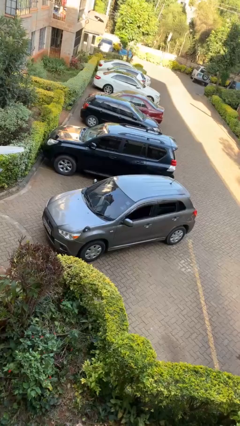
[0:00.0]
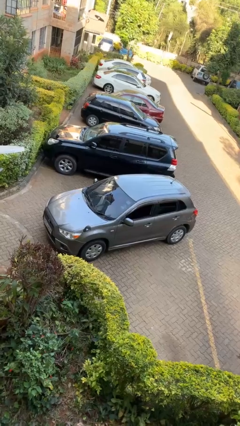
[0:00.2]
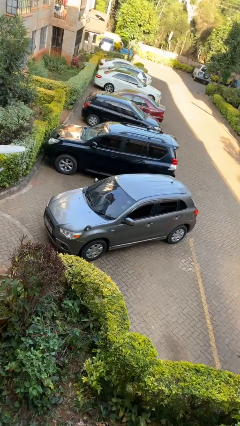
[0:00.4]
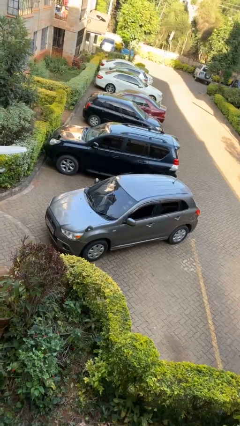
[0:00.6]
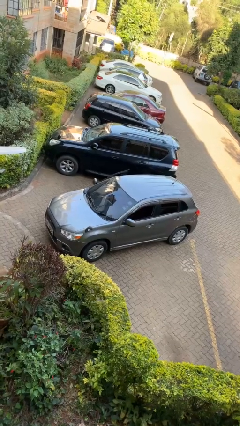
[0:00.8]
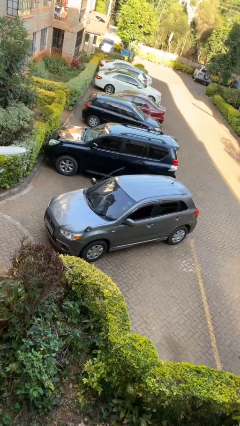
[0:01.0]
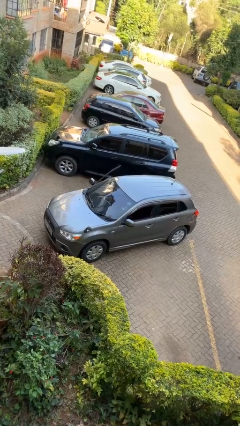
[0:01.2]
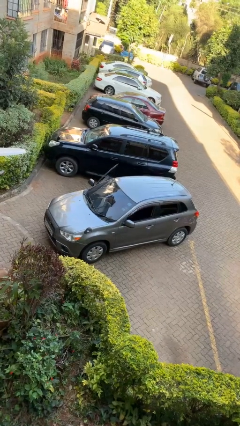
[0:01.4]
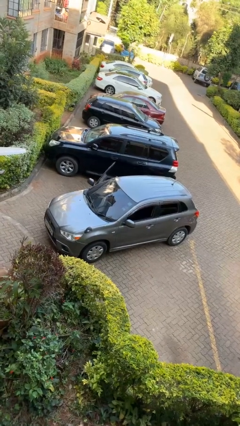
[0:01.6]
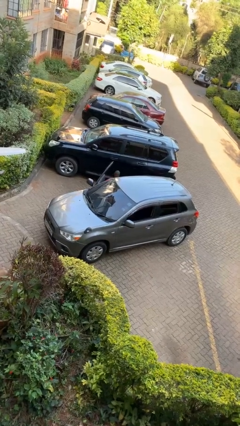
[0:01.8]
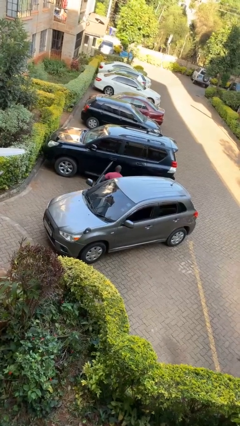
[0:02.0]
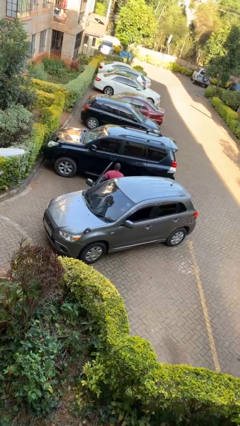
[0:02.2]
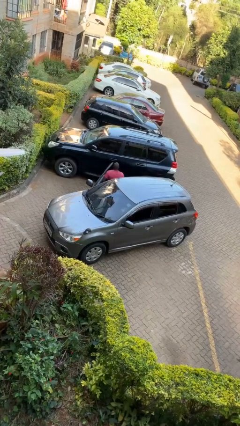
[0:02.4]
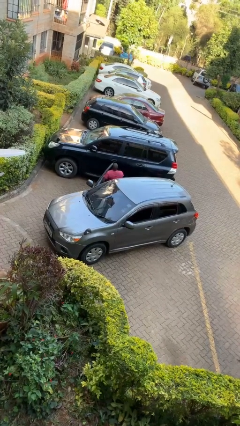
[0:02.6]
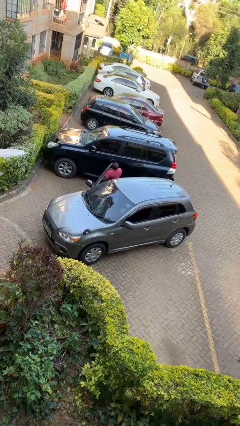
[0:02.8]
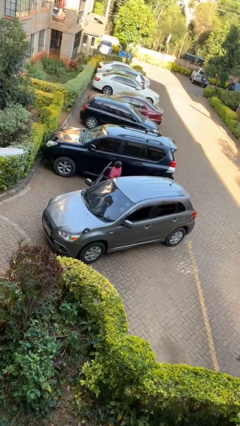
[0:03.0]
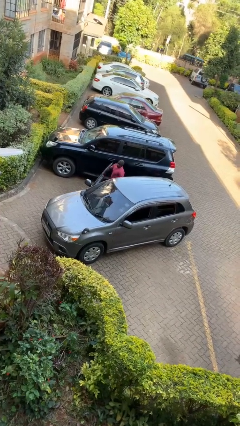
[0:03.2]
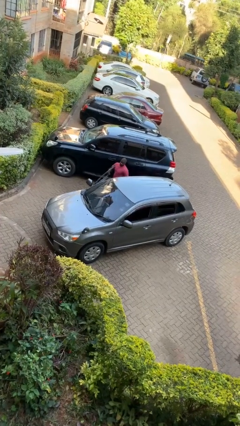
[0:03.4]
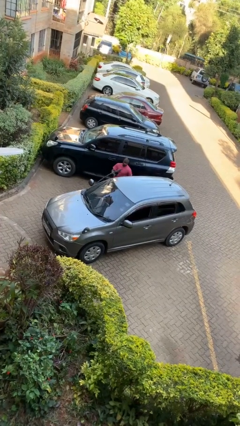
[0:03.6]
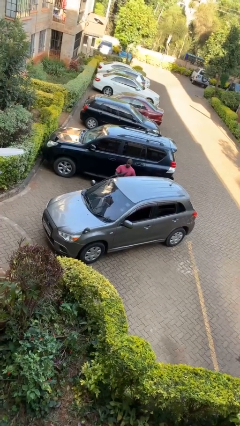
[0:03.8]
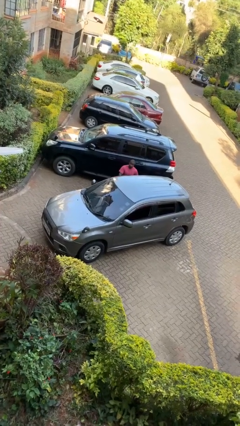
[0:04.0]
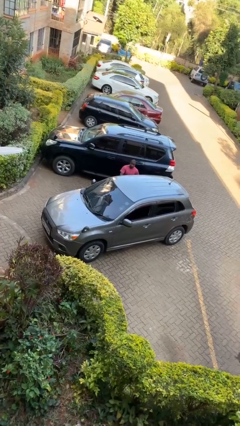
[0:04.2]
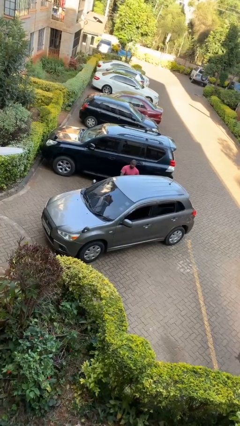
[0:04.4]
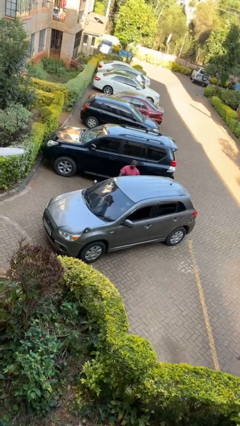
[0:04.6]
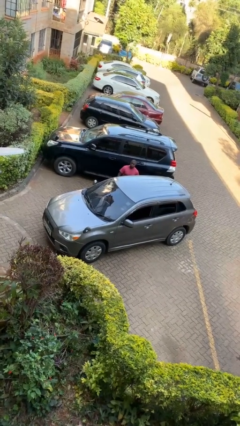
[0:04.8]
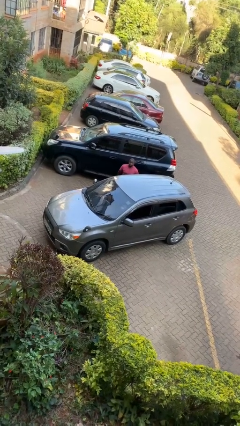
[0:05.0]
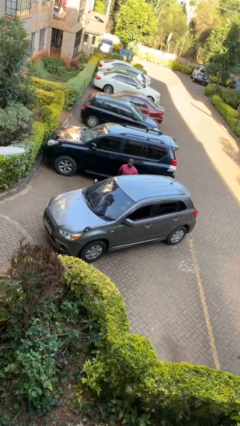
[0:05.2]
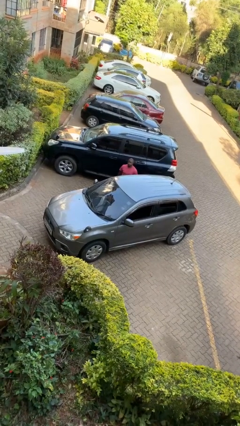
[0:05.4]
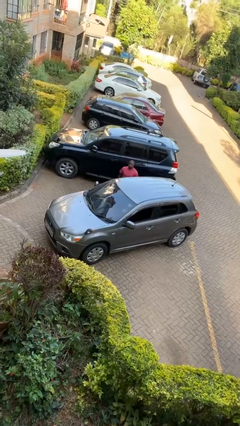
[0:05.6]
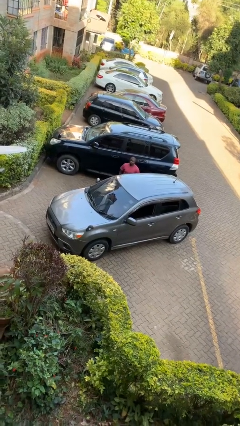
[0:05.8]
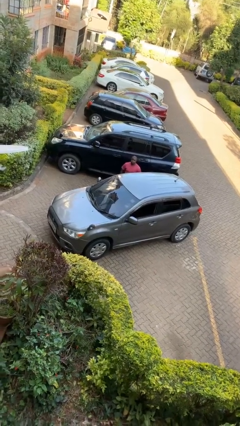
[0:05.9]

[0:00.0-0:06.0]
car drops off person

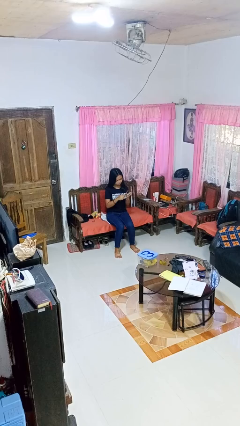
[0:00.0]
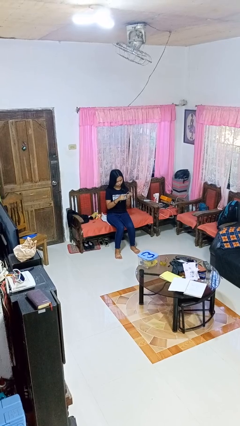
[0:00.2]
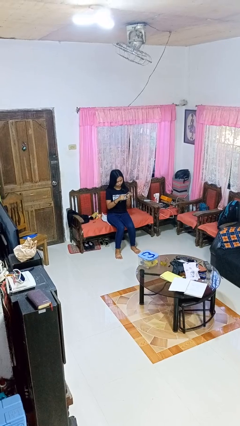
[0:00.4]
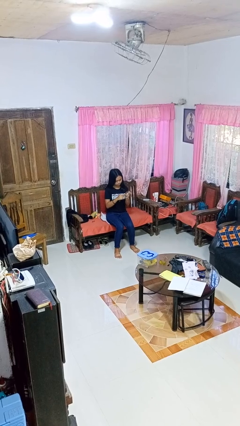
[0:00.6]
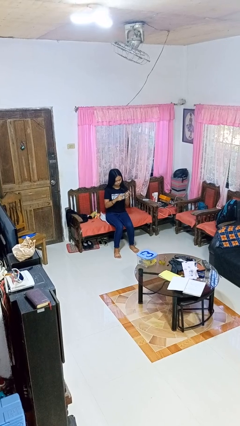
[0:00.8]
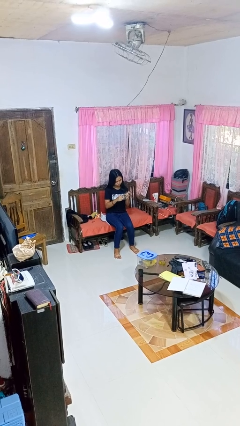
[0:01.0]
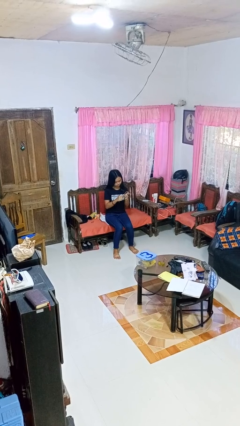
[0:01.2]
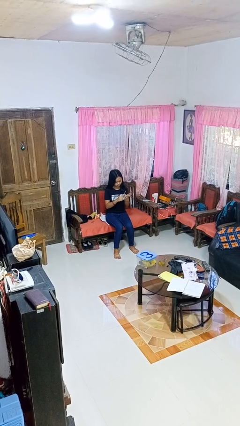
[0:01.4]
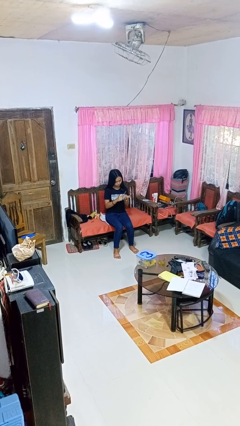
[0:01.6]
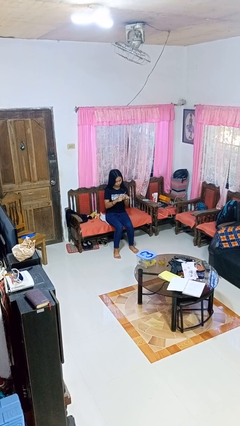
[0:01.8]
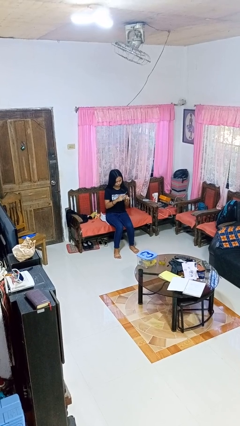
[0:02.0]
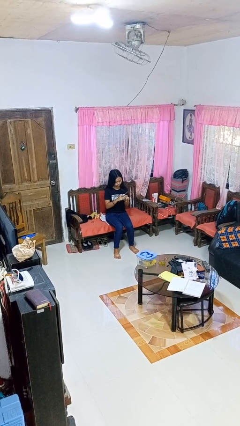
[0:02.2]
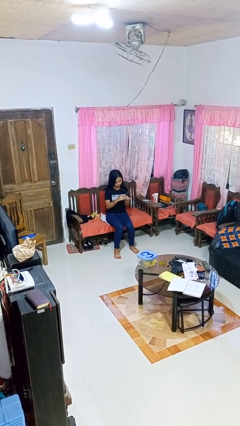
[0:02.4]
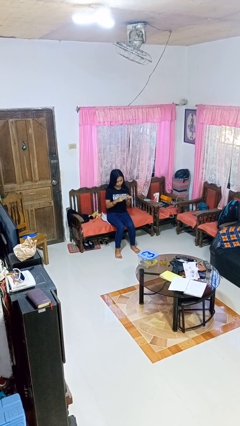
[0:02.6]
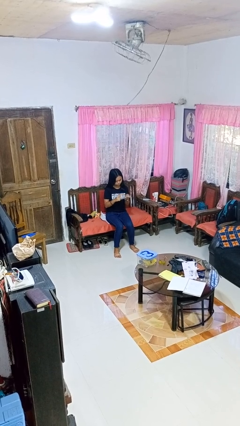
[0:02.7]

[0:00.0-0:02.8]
person files fingernails

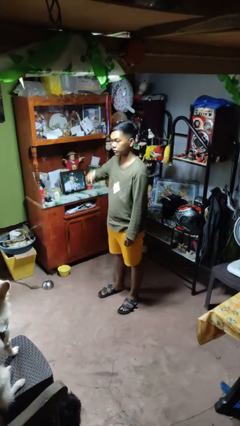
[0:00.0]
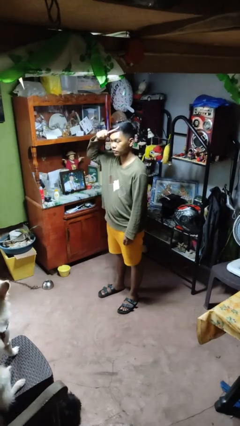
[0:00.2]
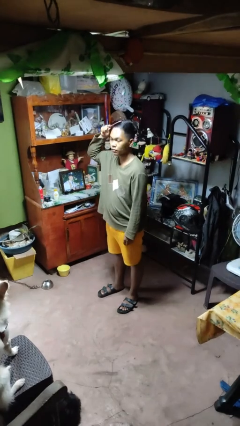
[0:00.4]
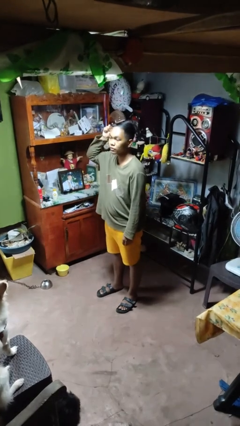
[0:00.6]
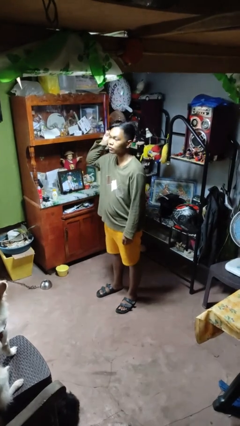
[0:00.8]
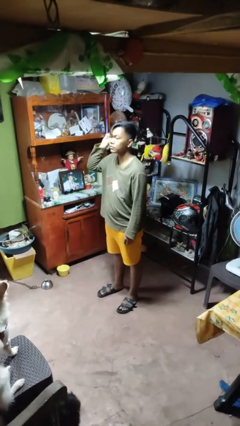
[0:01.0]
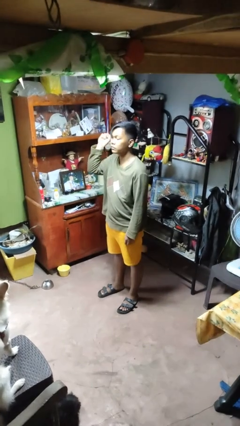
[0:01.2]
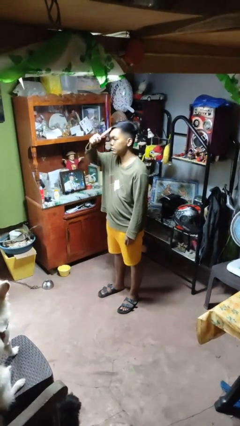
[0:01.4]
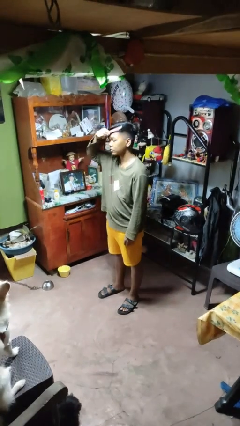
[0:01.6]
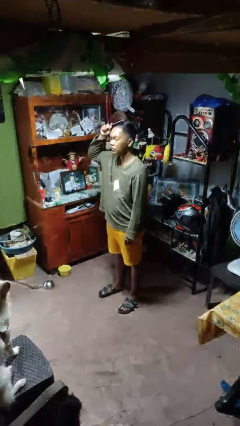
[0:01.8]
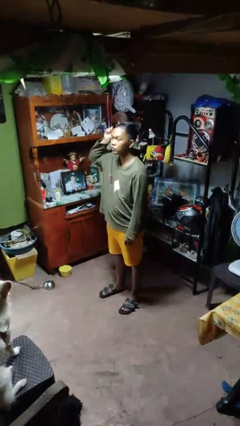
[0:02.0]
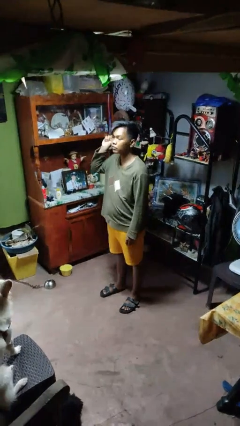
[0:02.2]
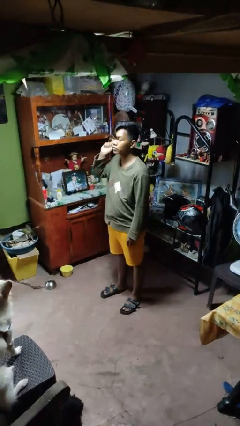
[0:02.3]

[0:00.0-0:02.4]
person brushes hair

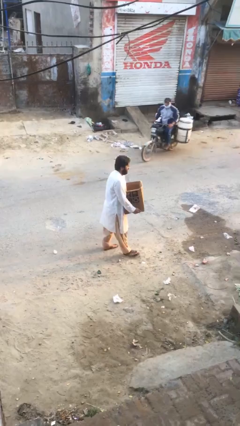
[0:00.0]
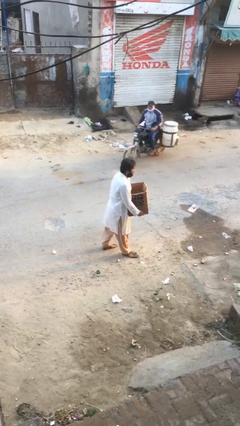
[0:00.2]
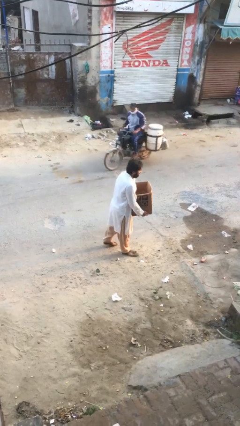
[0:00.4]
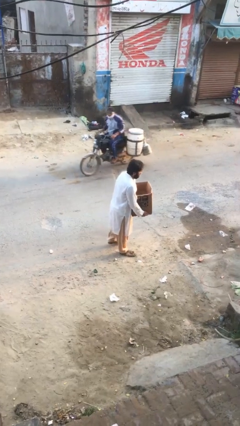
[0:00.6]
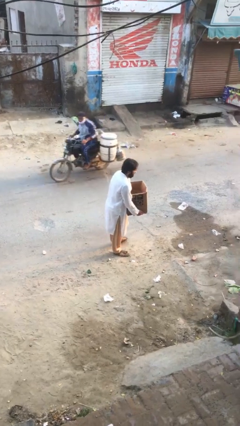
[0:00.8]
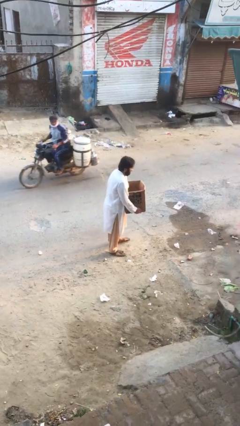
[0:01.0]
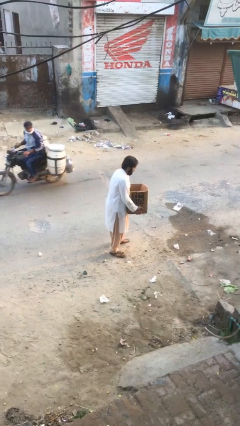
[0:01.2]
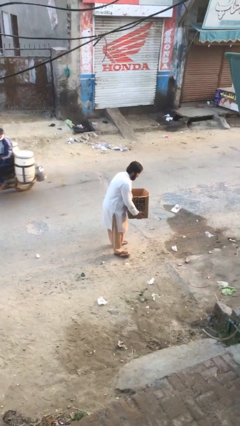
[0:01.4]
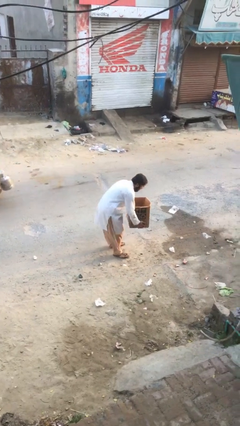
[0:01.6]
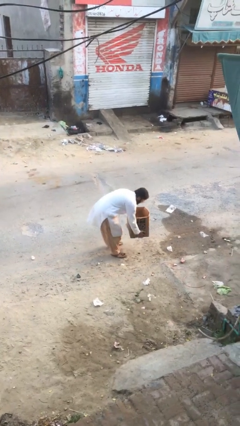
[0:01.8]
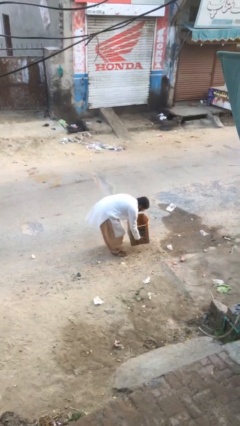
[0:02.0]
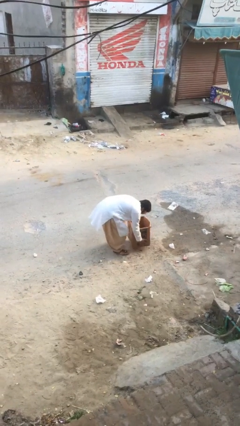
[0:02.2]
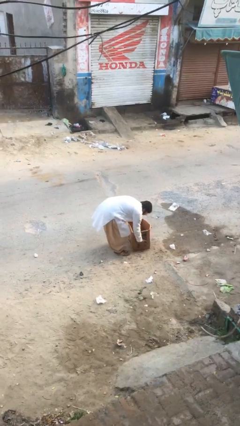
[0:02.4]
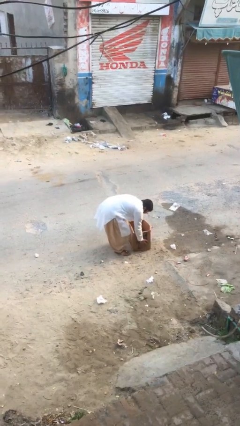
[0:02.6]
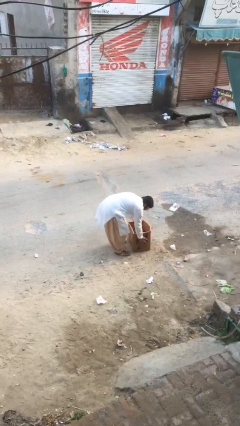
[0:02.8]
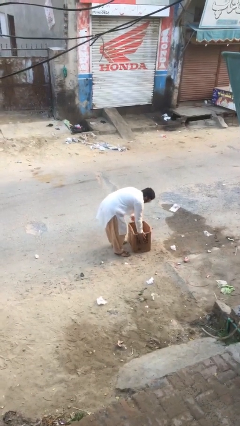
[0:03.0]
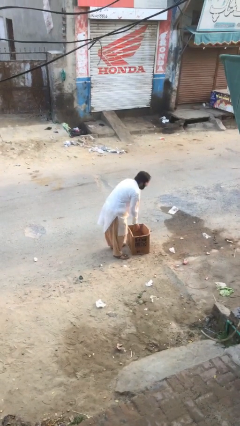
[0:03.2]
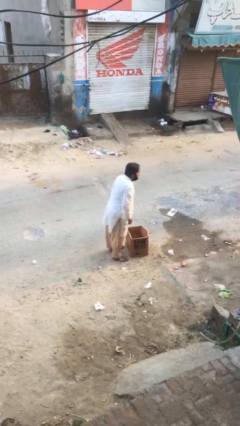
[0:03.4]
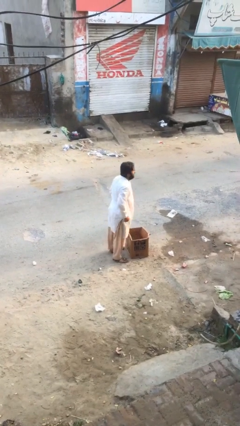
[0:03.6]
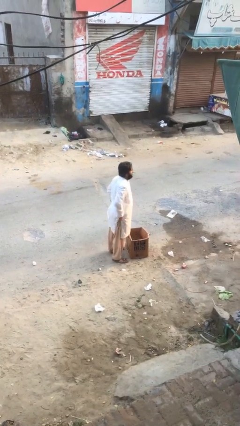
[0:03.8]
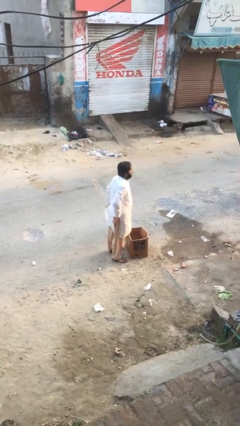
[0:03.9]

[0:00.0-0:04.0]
person puts down object on floor

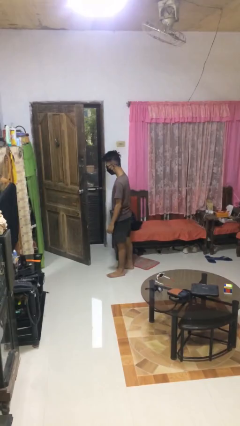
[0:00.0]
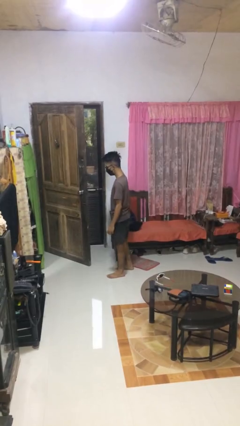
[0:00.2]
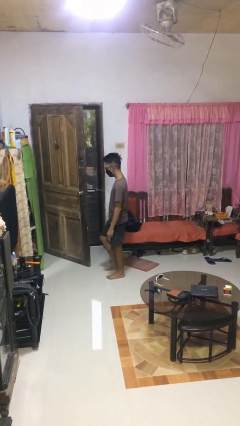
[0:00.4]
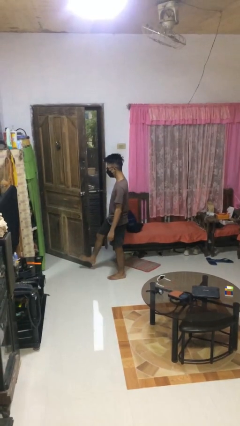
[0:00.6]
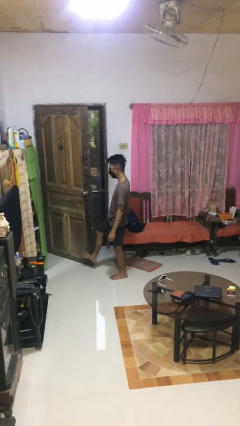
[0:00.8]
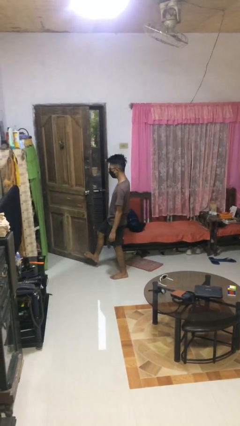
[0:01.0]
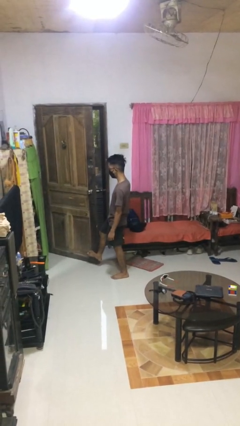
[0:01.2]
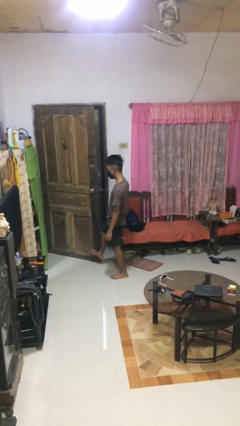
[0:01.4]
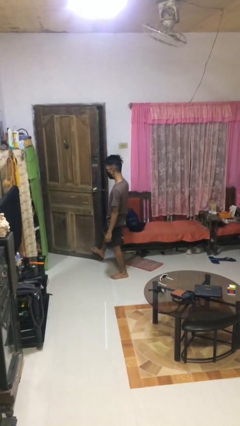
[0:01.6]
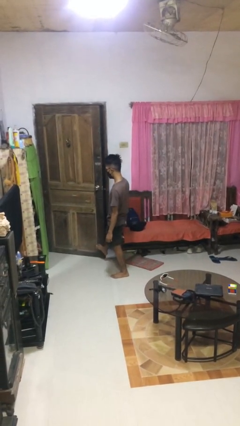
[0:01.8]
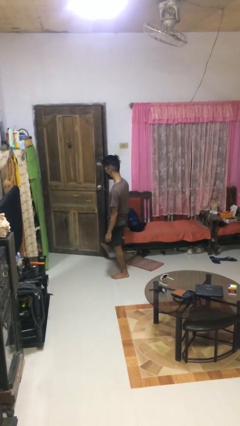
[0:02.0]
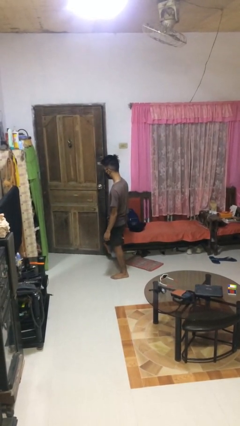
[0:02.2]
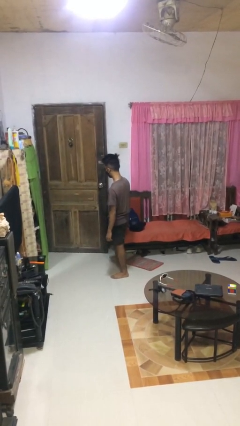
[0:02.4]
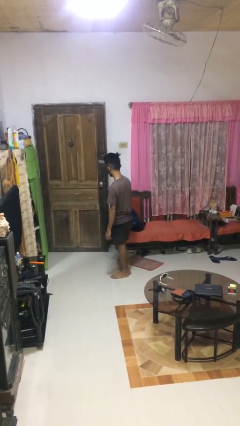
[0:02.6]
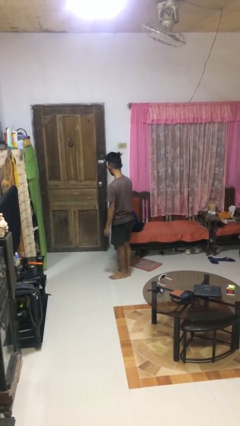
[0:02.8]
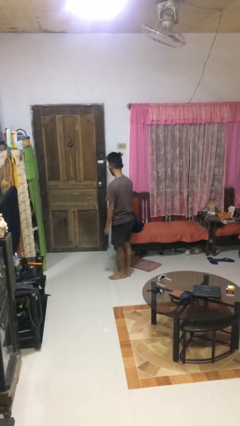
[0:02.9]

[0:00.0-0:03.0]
person closes door with foot
